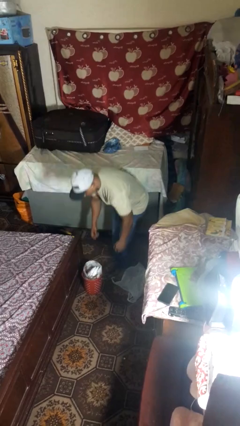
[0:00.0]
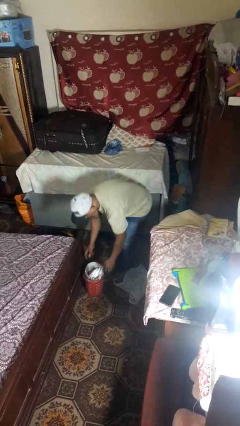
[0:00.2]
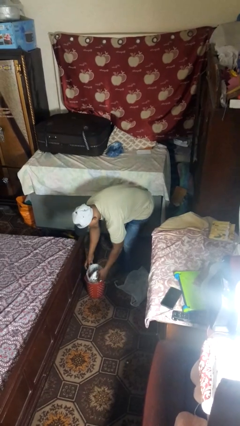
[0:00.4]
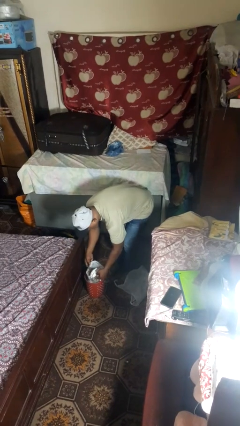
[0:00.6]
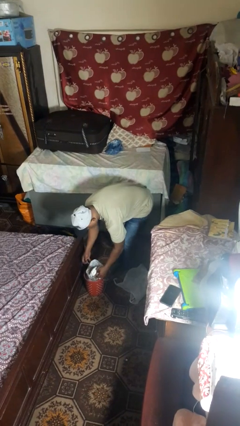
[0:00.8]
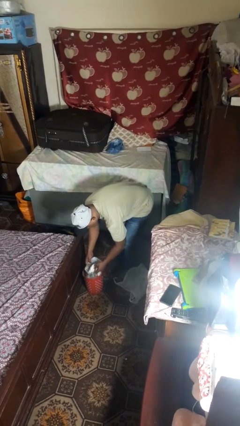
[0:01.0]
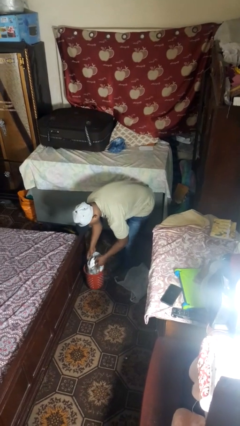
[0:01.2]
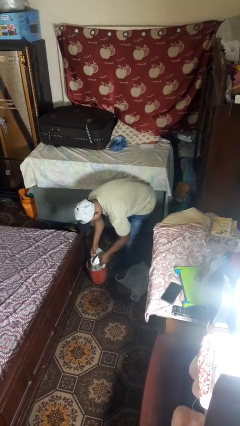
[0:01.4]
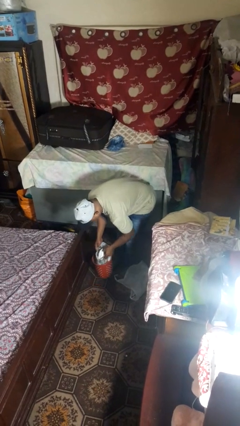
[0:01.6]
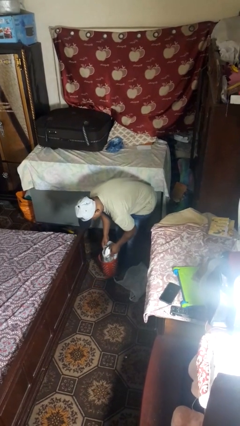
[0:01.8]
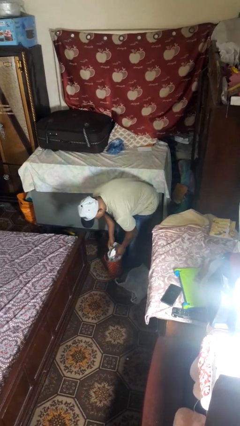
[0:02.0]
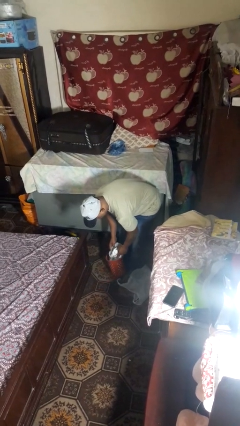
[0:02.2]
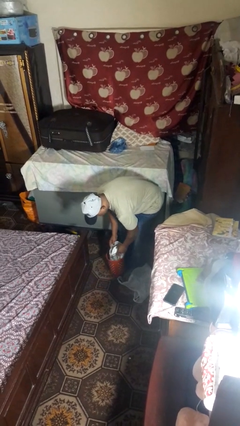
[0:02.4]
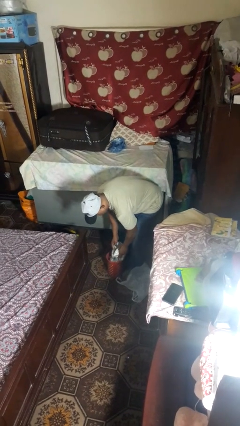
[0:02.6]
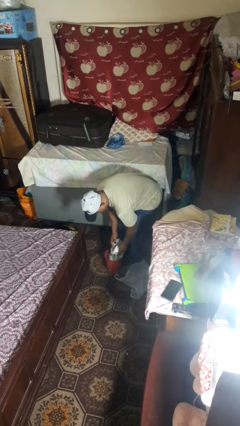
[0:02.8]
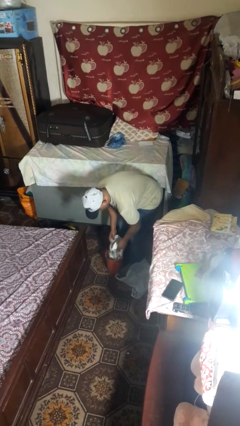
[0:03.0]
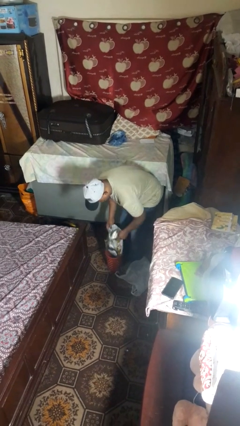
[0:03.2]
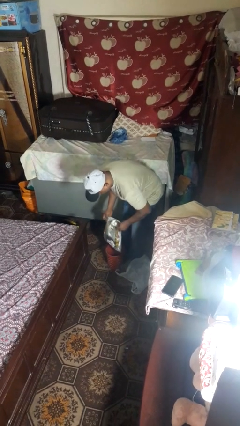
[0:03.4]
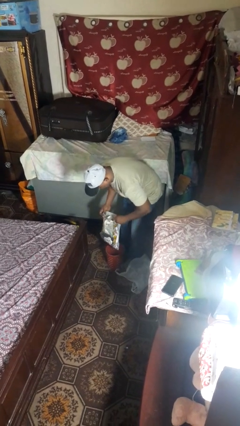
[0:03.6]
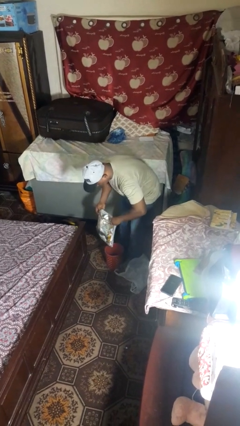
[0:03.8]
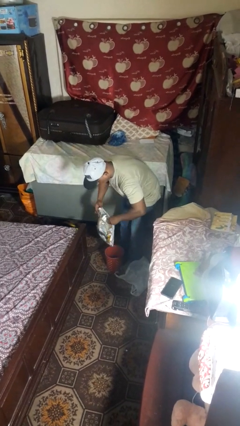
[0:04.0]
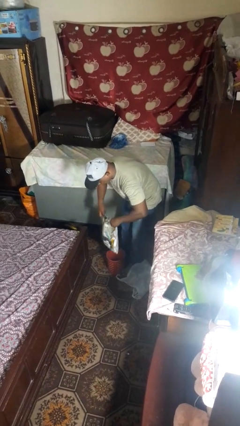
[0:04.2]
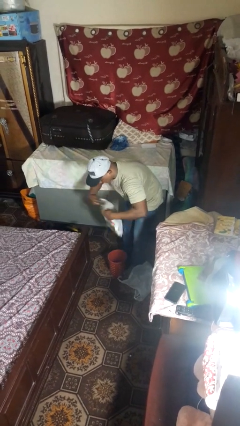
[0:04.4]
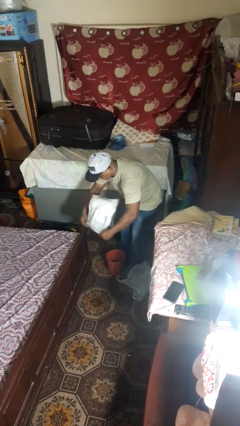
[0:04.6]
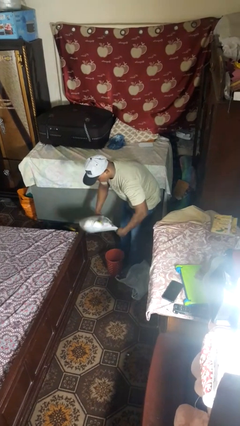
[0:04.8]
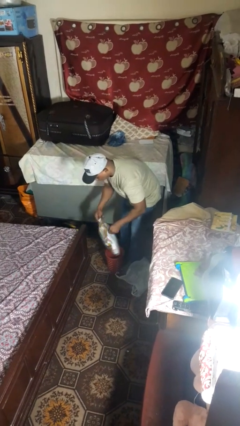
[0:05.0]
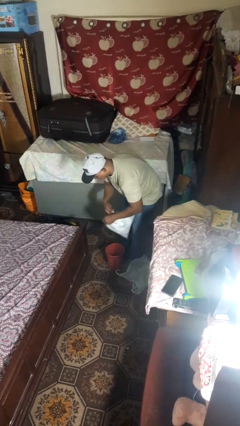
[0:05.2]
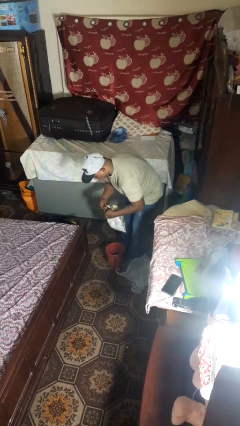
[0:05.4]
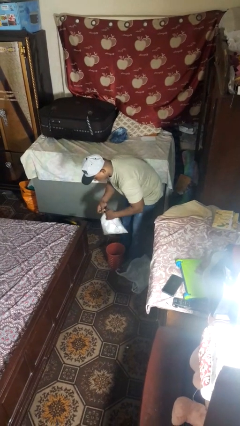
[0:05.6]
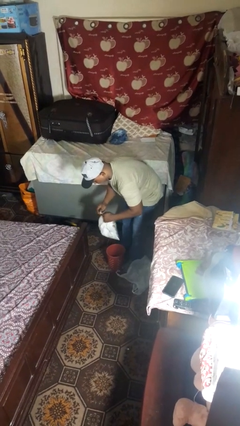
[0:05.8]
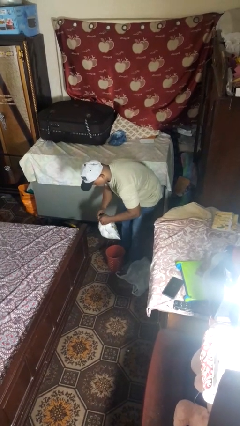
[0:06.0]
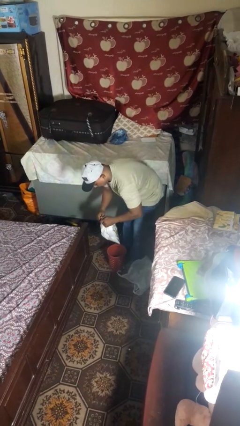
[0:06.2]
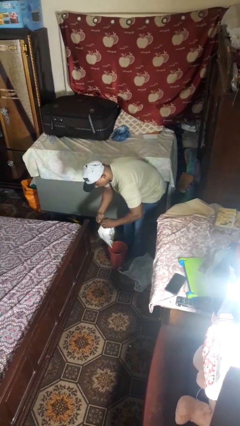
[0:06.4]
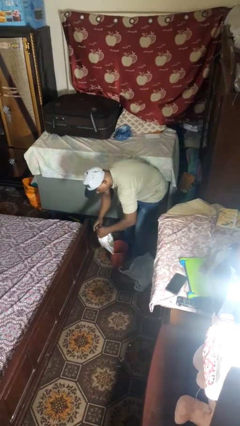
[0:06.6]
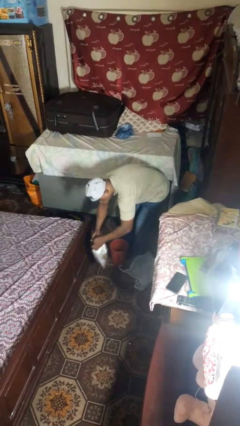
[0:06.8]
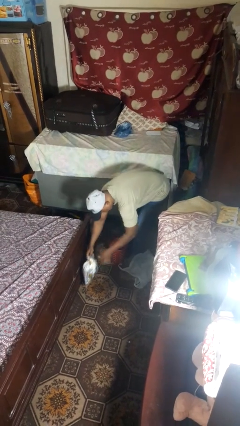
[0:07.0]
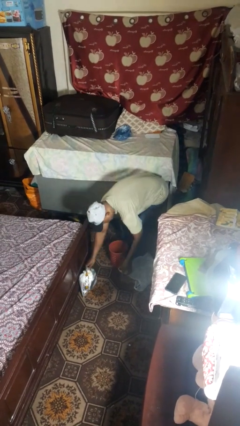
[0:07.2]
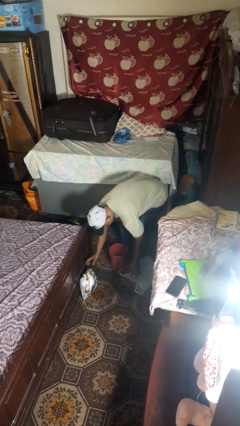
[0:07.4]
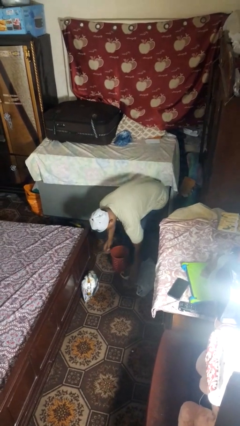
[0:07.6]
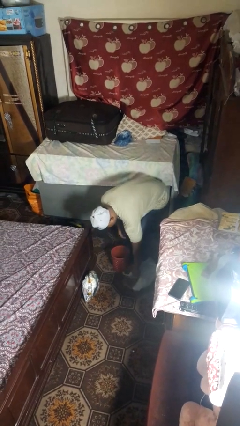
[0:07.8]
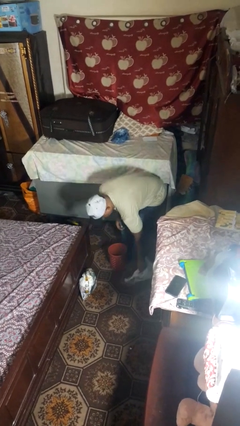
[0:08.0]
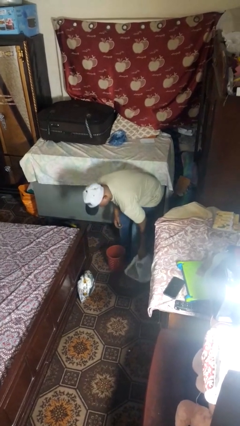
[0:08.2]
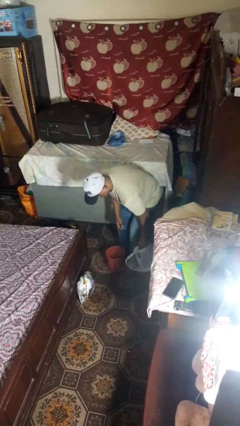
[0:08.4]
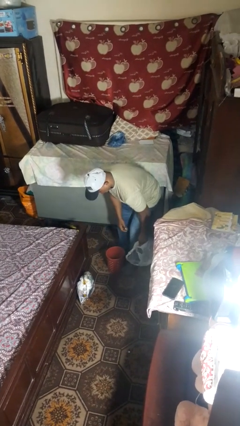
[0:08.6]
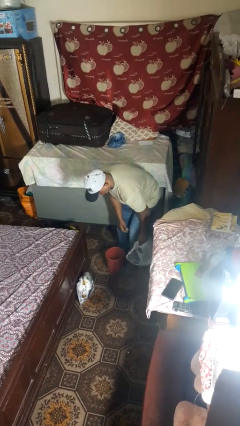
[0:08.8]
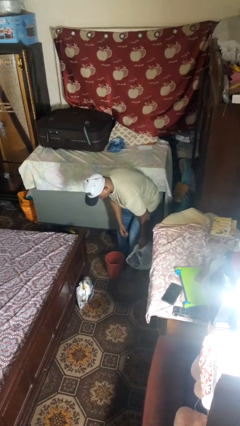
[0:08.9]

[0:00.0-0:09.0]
person removes trashbag from trashcan

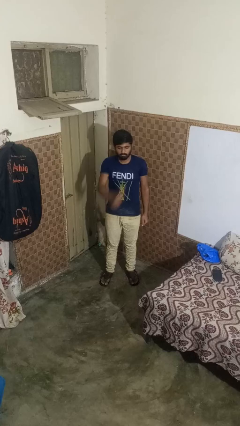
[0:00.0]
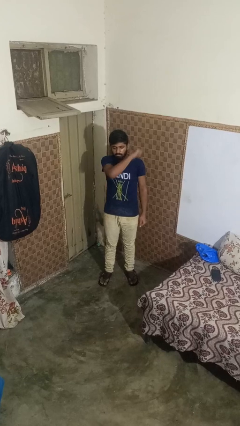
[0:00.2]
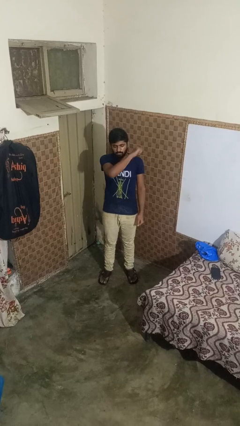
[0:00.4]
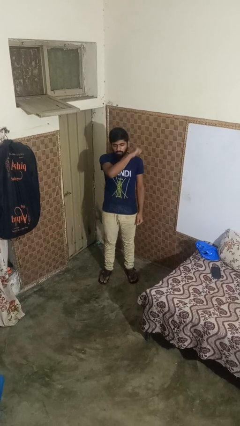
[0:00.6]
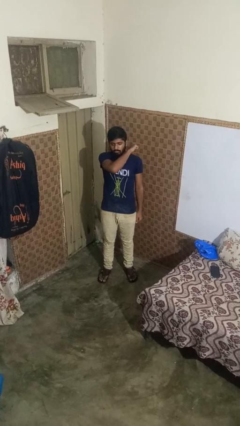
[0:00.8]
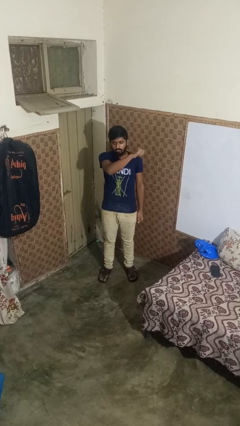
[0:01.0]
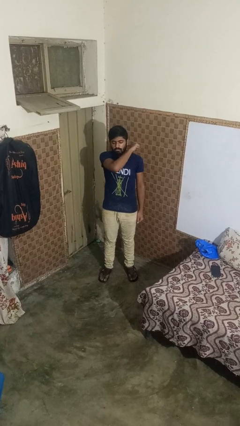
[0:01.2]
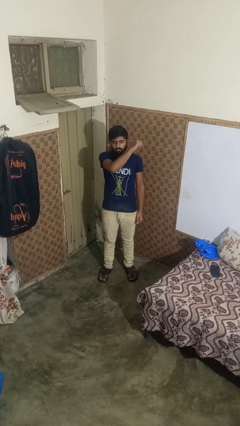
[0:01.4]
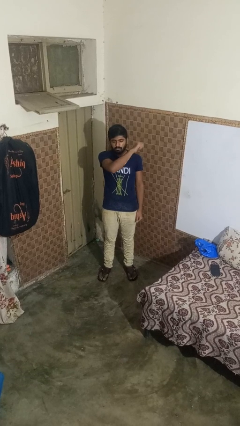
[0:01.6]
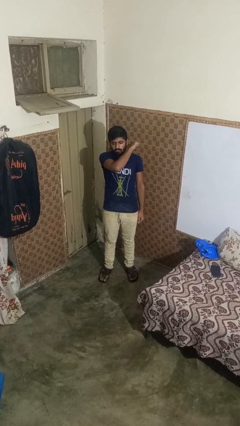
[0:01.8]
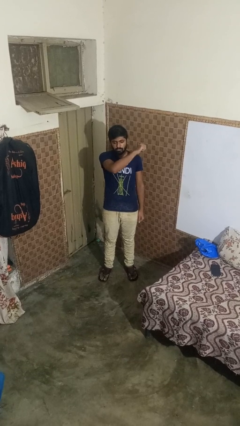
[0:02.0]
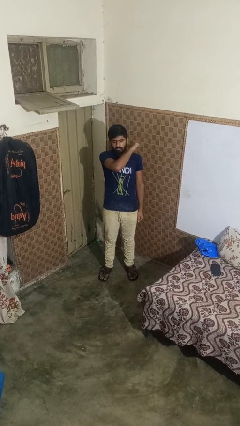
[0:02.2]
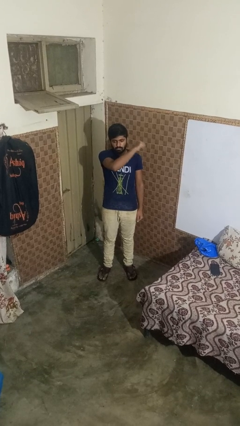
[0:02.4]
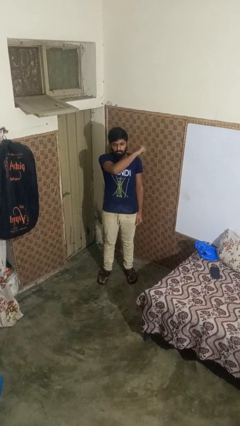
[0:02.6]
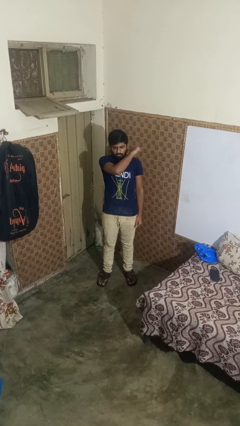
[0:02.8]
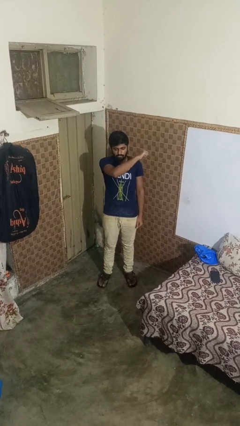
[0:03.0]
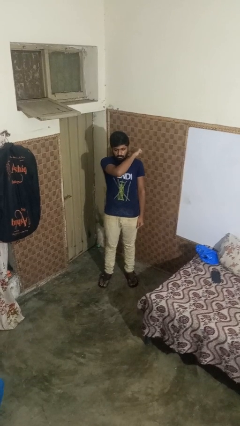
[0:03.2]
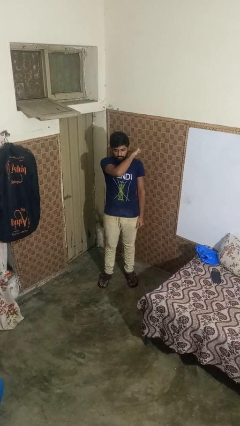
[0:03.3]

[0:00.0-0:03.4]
person gestures behind me

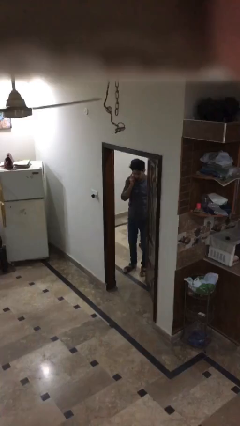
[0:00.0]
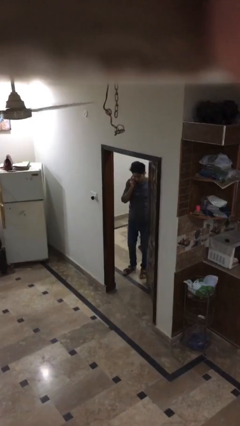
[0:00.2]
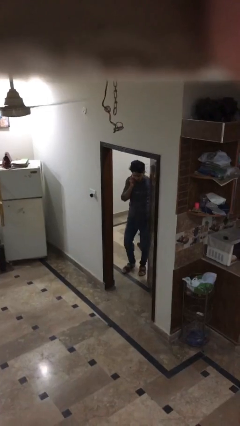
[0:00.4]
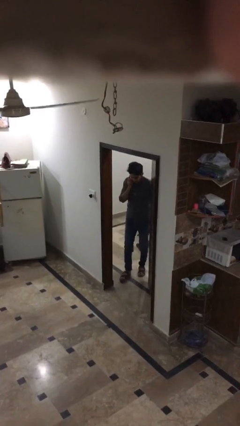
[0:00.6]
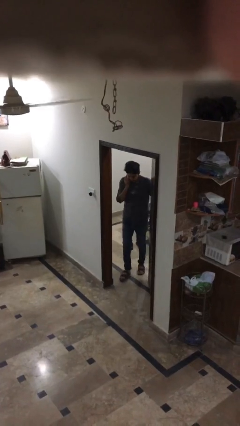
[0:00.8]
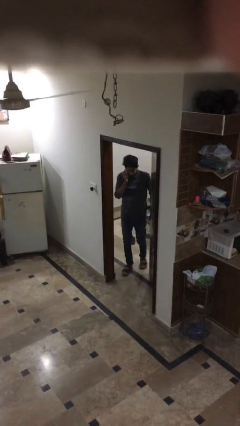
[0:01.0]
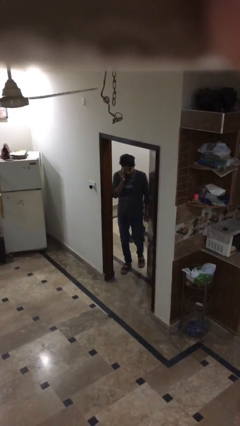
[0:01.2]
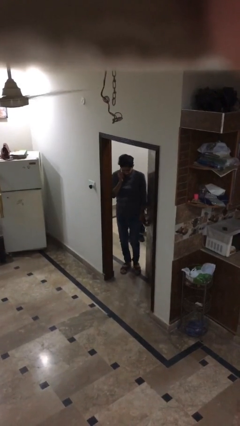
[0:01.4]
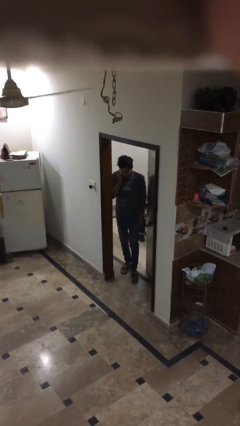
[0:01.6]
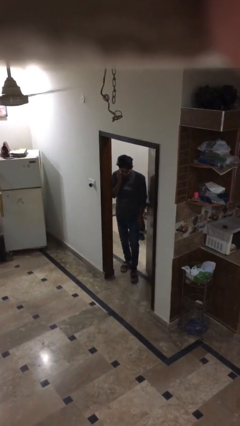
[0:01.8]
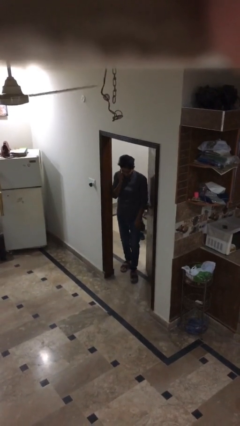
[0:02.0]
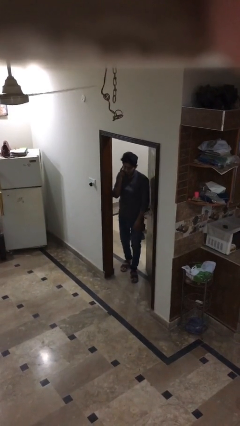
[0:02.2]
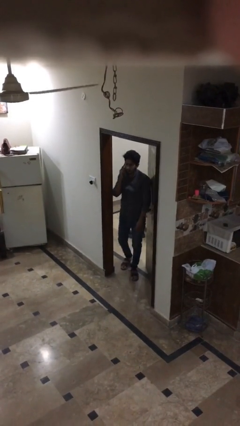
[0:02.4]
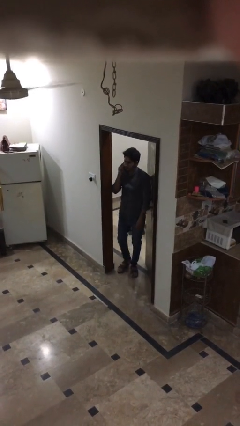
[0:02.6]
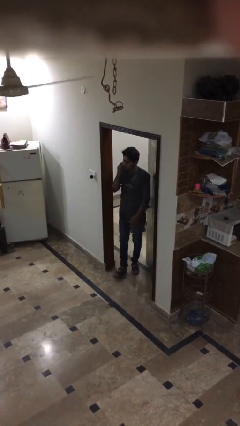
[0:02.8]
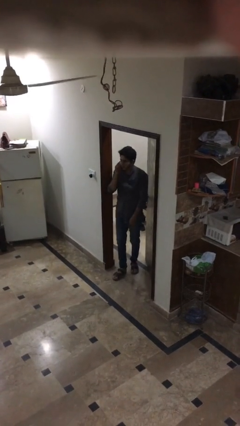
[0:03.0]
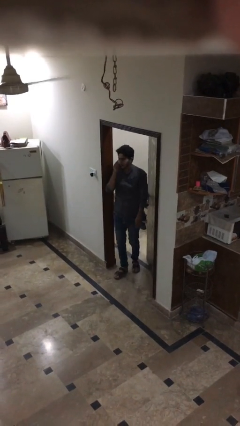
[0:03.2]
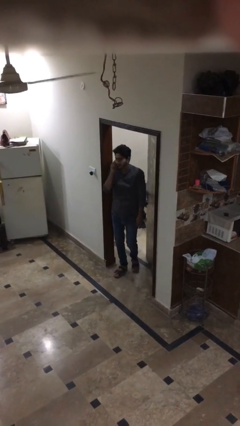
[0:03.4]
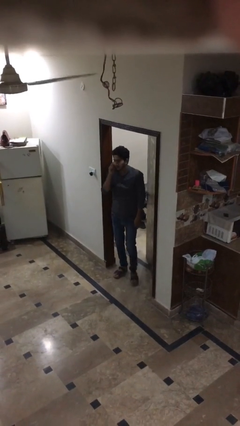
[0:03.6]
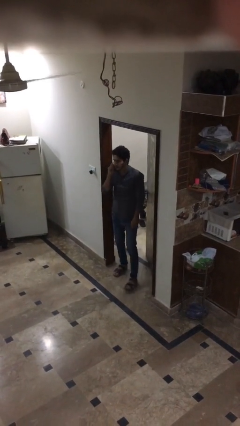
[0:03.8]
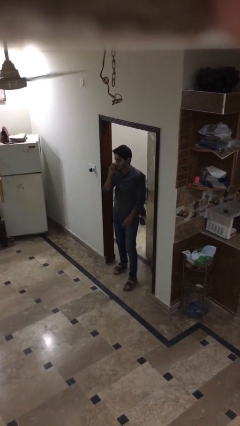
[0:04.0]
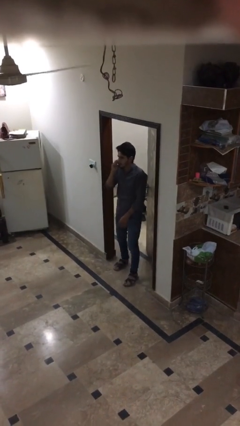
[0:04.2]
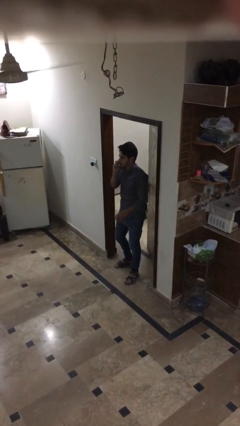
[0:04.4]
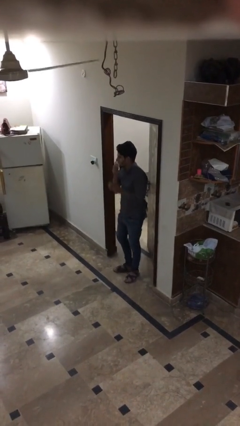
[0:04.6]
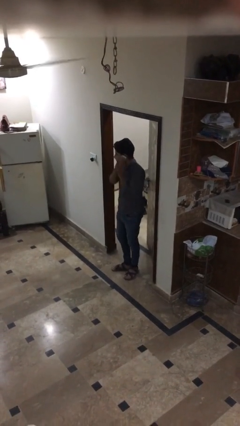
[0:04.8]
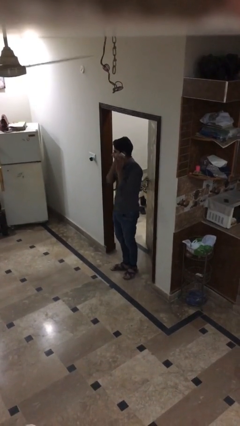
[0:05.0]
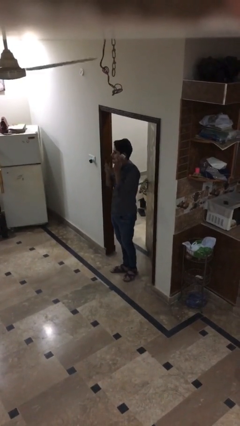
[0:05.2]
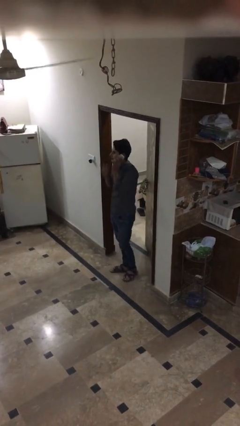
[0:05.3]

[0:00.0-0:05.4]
person enters scene through structure

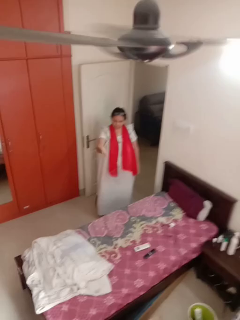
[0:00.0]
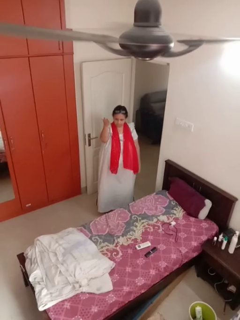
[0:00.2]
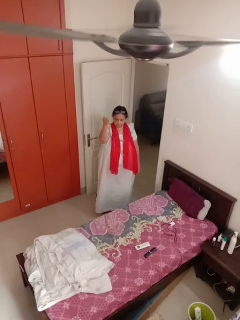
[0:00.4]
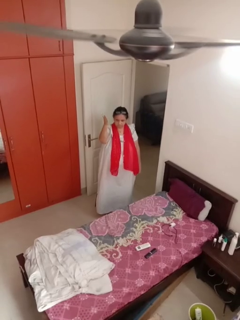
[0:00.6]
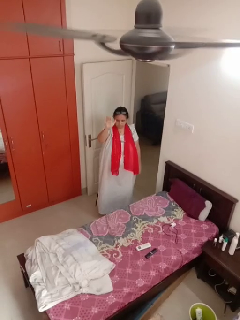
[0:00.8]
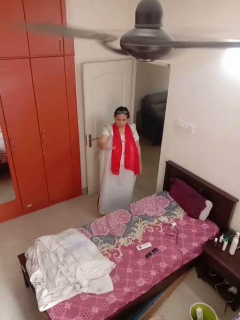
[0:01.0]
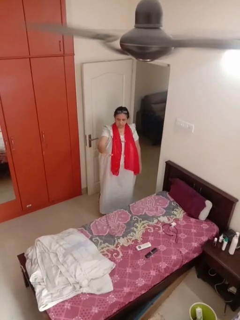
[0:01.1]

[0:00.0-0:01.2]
person gestures swipe up
